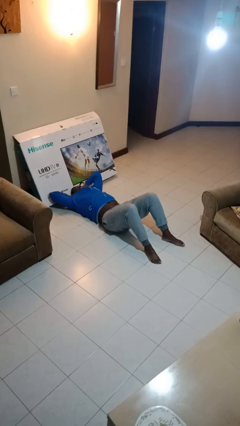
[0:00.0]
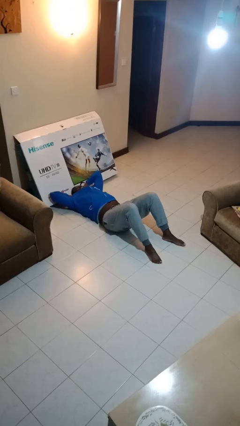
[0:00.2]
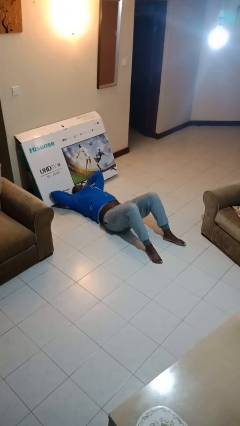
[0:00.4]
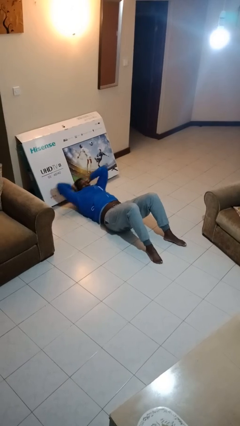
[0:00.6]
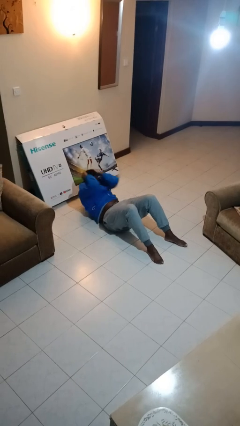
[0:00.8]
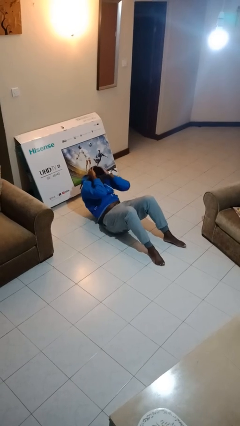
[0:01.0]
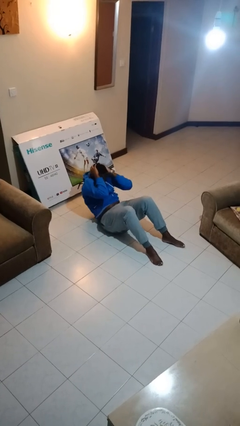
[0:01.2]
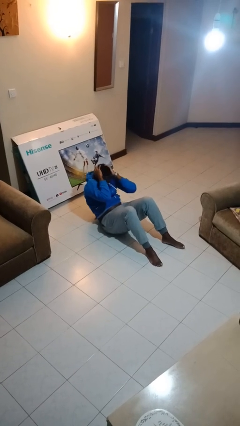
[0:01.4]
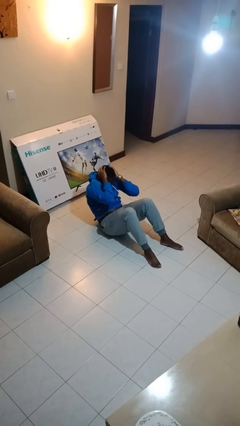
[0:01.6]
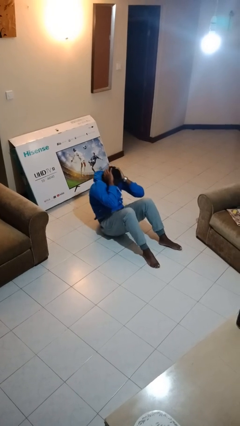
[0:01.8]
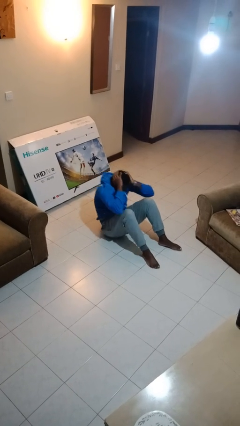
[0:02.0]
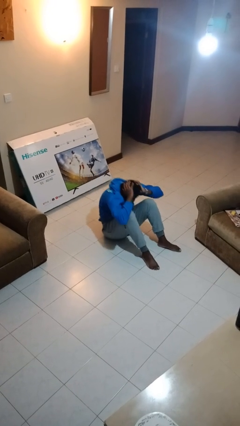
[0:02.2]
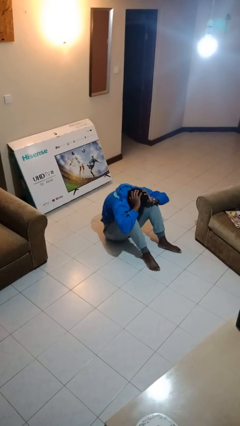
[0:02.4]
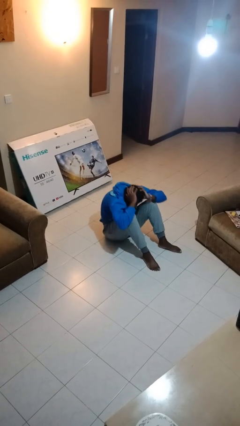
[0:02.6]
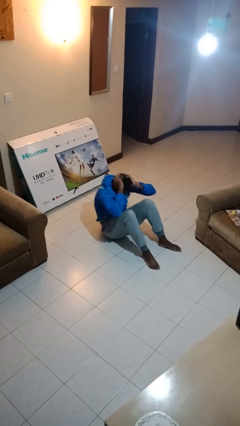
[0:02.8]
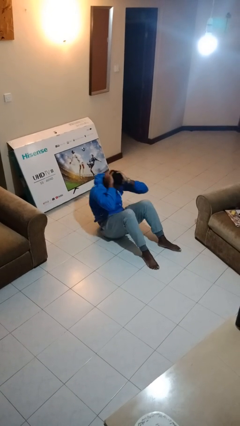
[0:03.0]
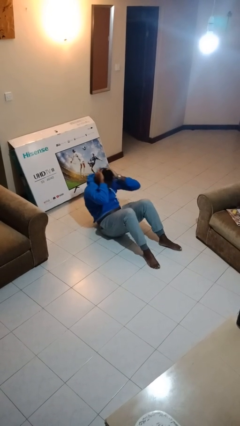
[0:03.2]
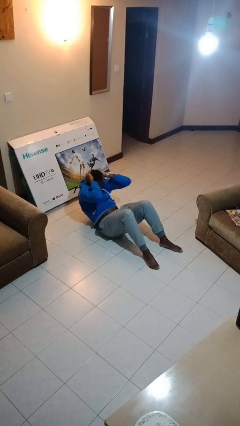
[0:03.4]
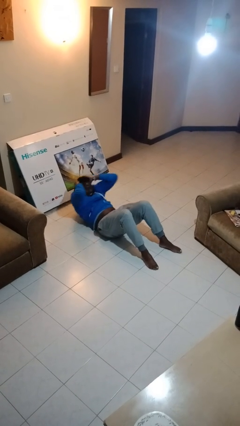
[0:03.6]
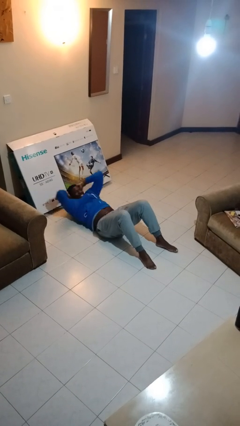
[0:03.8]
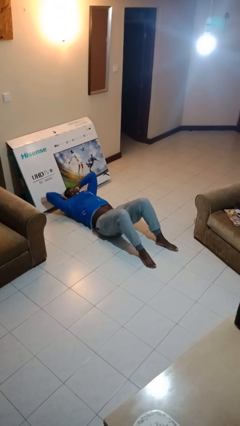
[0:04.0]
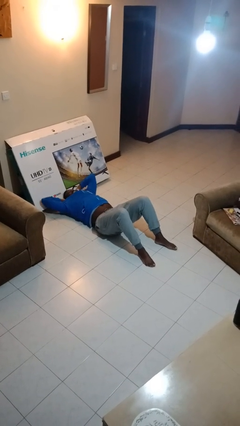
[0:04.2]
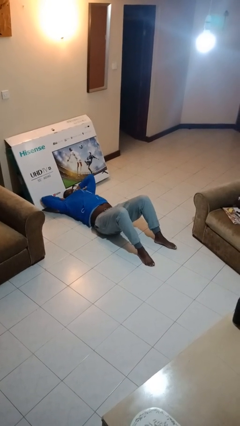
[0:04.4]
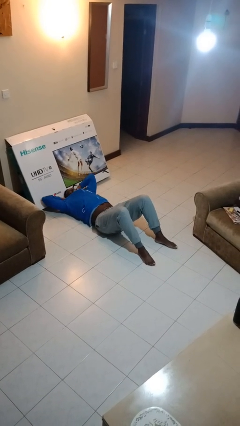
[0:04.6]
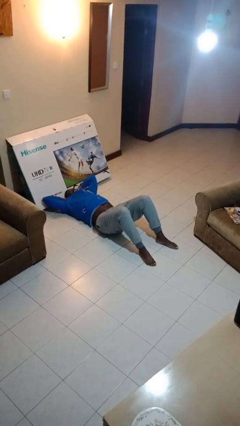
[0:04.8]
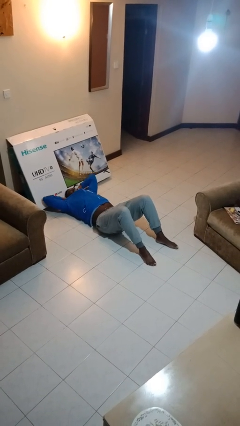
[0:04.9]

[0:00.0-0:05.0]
person exercises with situp

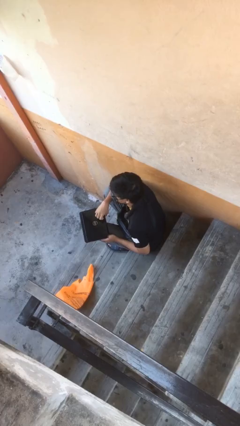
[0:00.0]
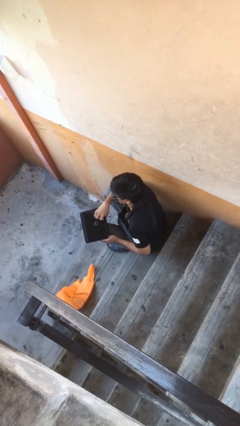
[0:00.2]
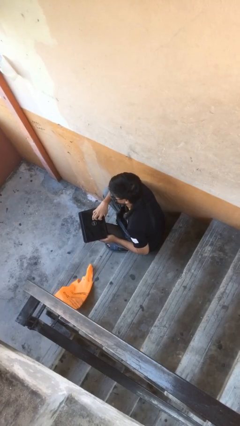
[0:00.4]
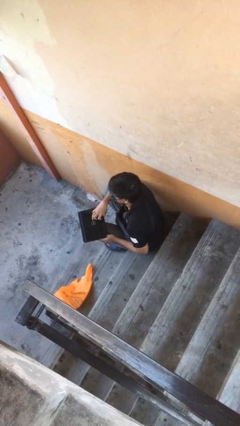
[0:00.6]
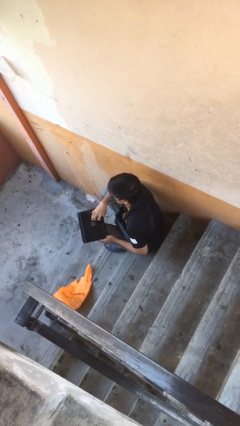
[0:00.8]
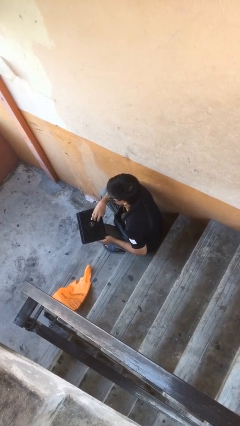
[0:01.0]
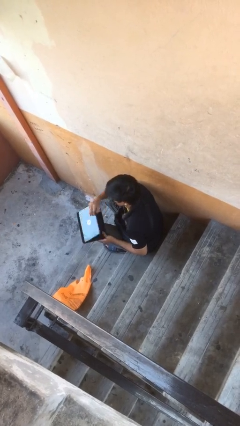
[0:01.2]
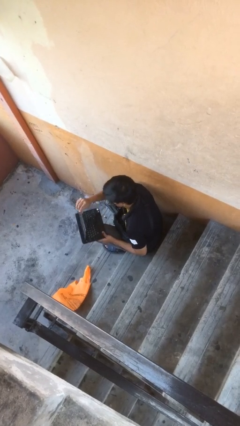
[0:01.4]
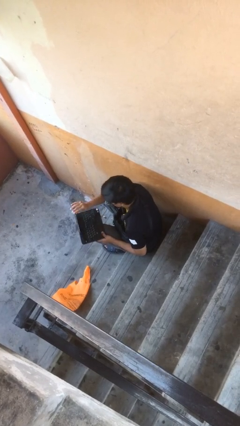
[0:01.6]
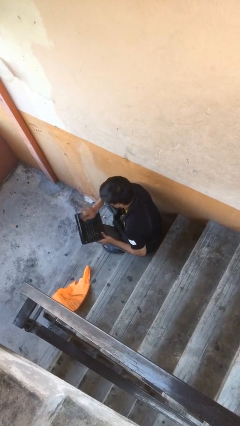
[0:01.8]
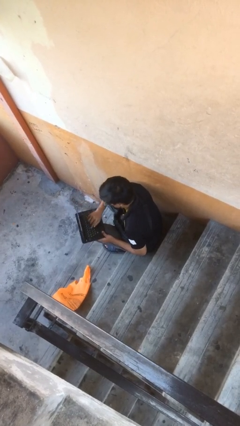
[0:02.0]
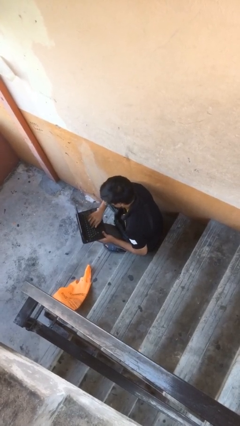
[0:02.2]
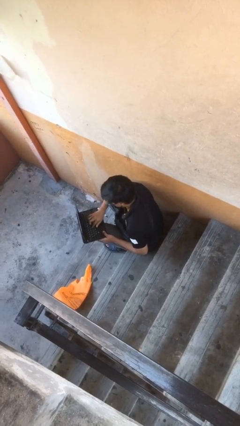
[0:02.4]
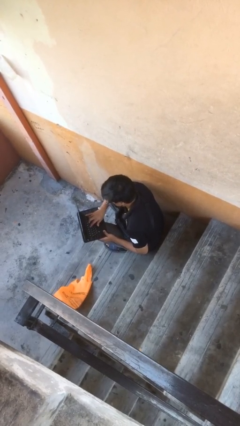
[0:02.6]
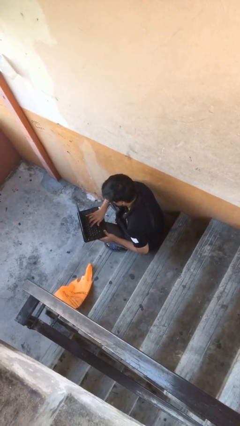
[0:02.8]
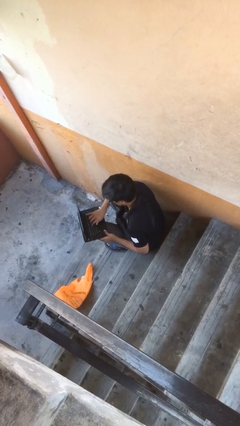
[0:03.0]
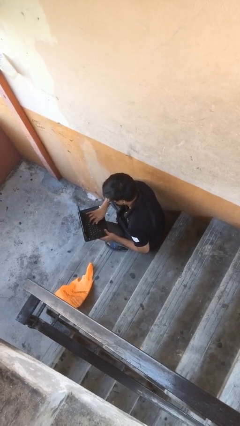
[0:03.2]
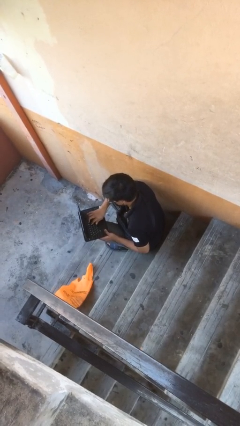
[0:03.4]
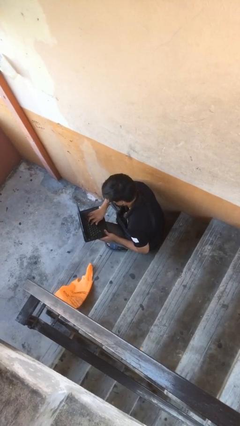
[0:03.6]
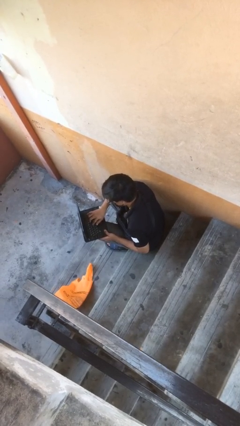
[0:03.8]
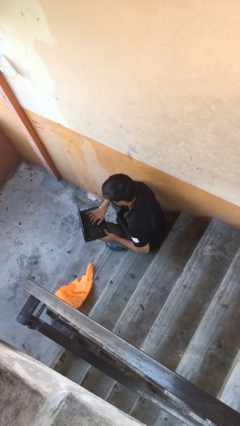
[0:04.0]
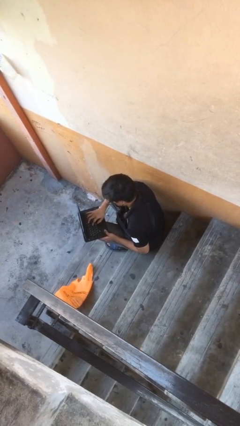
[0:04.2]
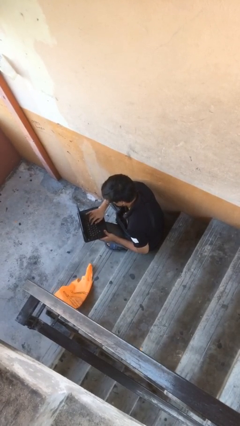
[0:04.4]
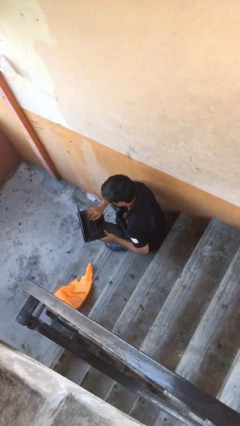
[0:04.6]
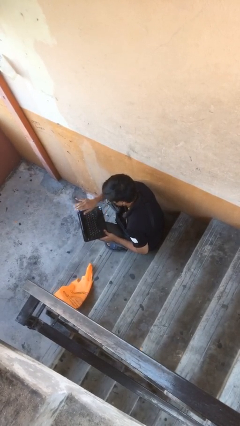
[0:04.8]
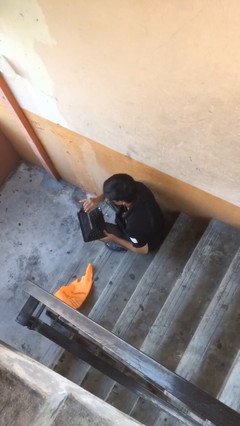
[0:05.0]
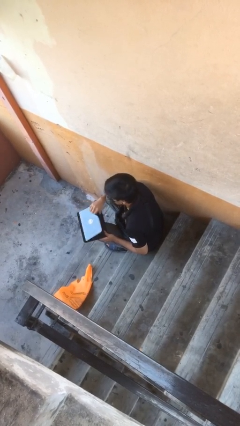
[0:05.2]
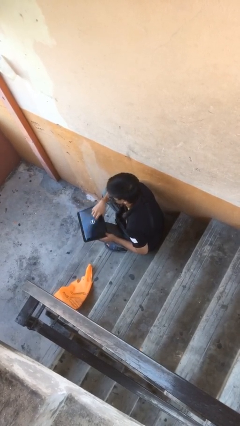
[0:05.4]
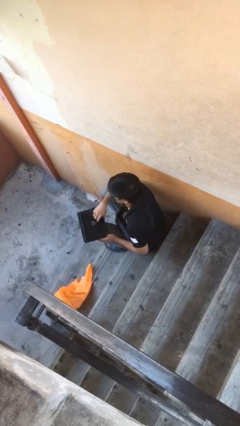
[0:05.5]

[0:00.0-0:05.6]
person interacts with laptop

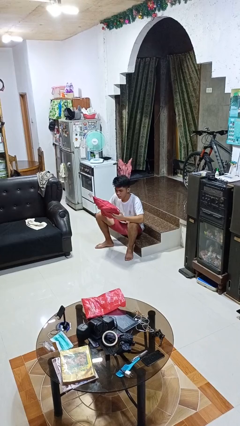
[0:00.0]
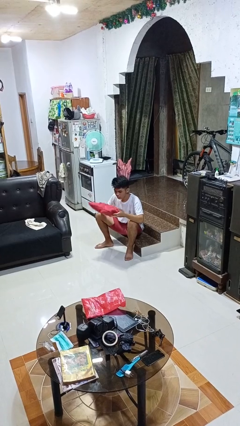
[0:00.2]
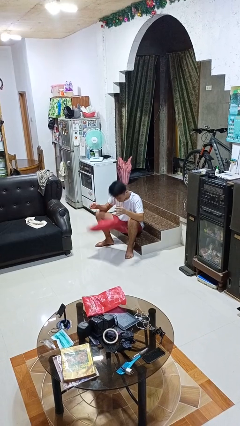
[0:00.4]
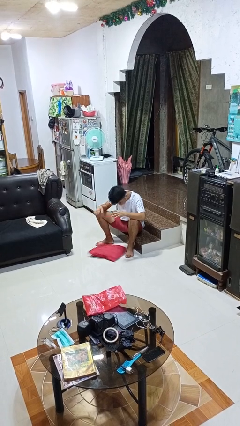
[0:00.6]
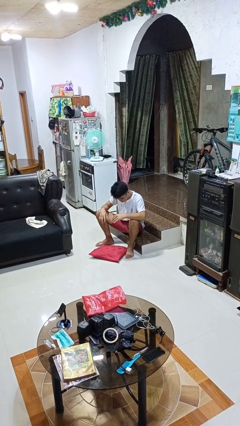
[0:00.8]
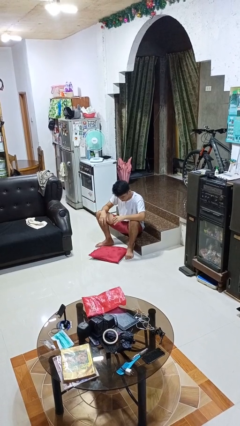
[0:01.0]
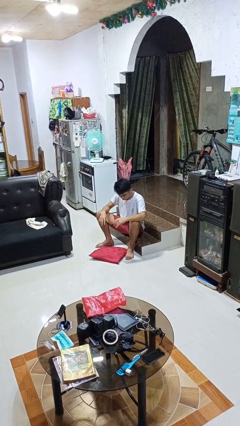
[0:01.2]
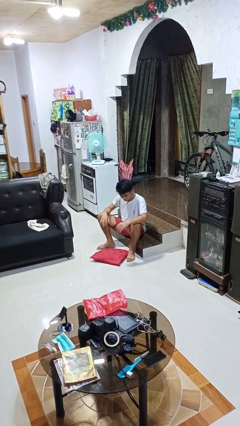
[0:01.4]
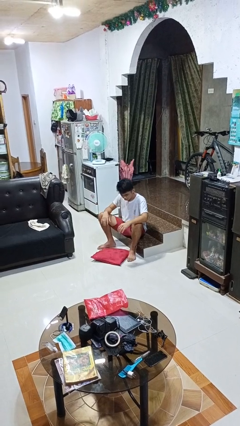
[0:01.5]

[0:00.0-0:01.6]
person drops object

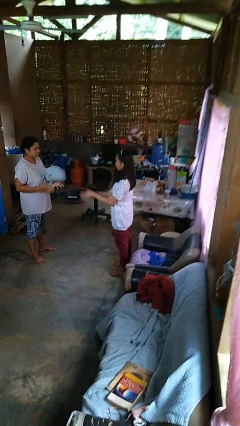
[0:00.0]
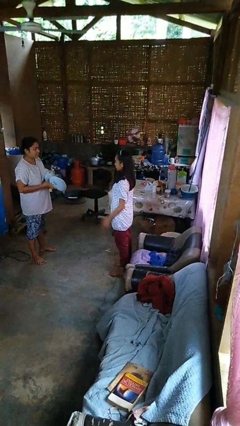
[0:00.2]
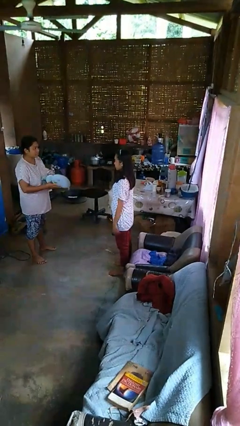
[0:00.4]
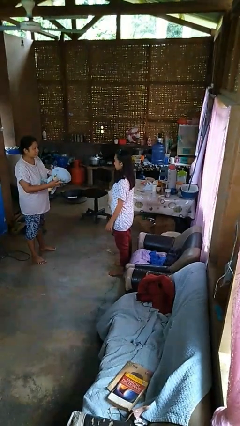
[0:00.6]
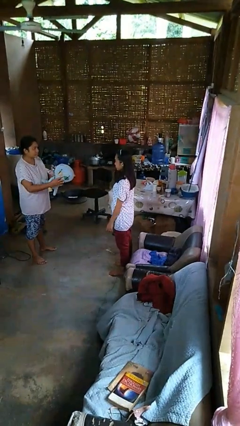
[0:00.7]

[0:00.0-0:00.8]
person throws object to person

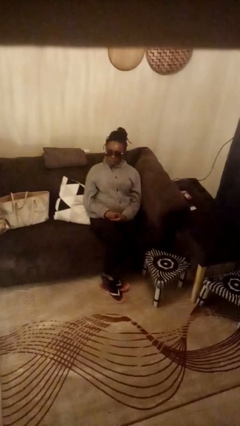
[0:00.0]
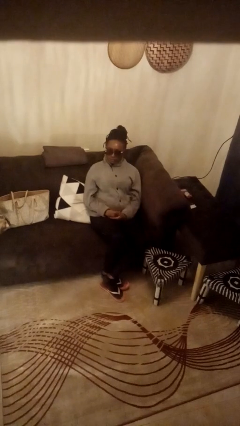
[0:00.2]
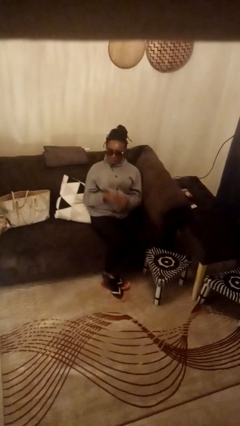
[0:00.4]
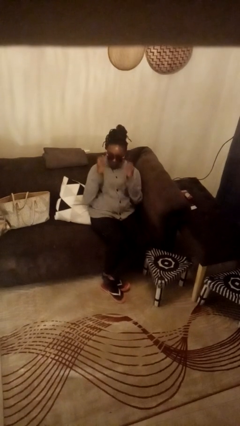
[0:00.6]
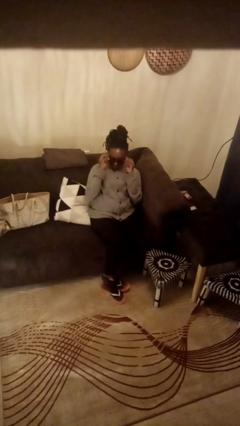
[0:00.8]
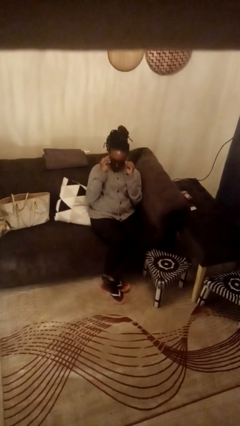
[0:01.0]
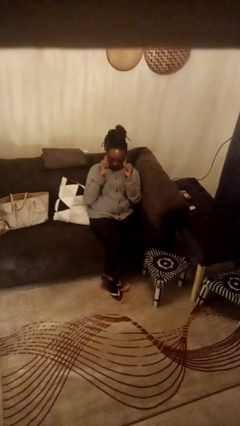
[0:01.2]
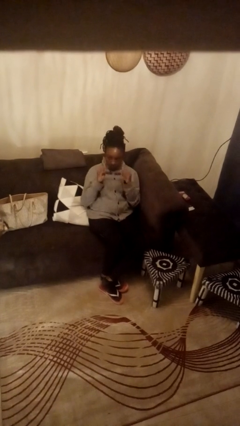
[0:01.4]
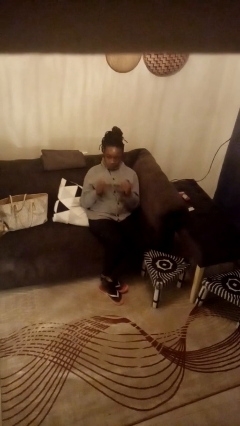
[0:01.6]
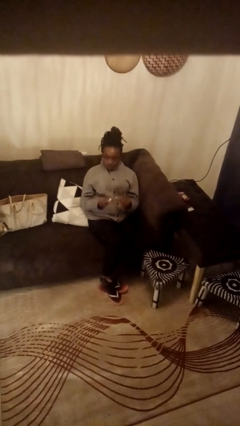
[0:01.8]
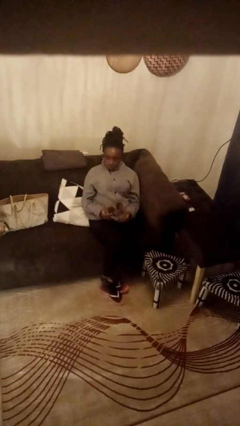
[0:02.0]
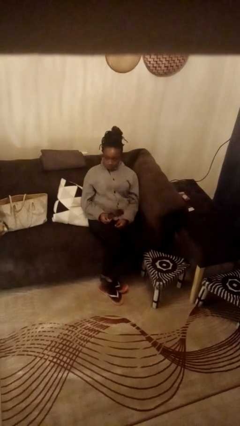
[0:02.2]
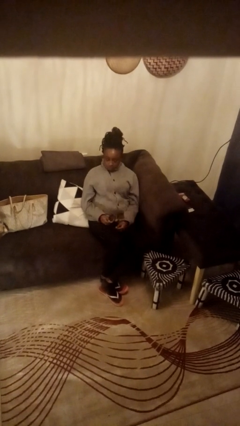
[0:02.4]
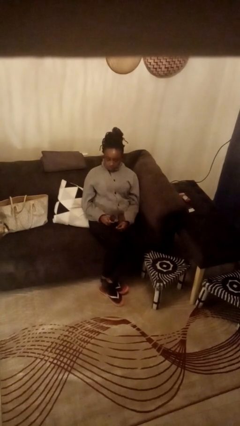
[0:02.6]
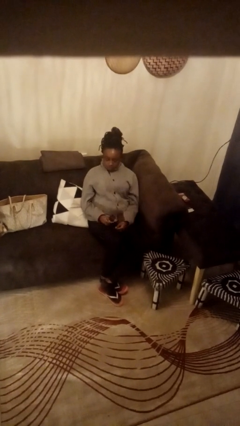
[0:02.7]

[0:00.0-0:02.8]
person takes off sunglasses

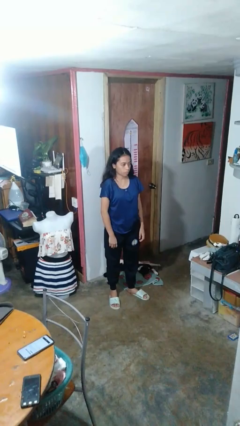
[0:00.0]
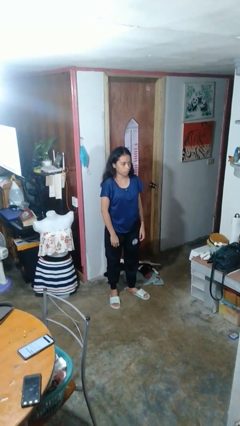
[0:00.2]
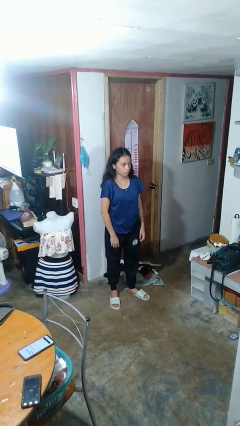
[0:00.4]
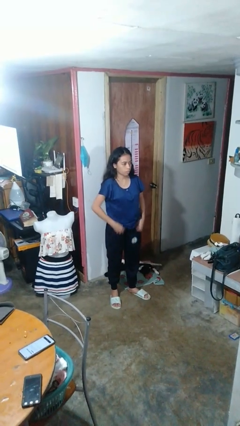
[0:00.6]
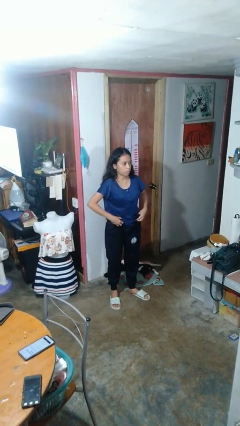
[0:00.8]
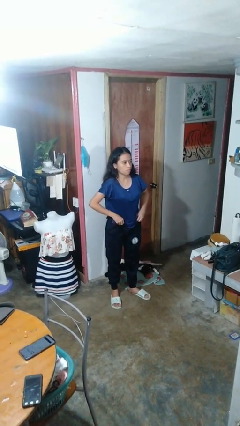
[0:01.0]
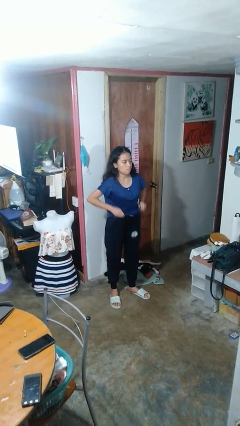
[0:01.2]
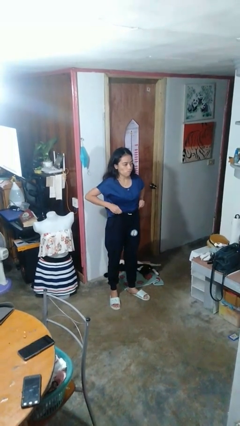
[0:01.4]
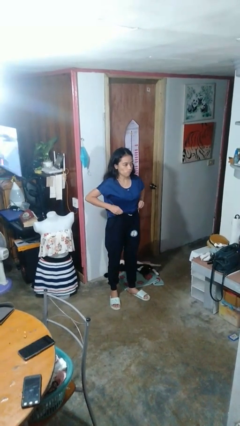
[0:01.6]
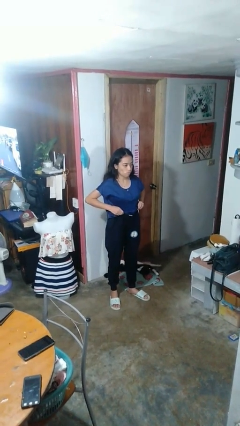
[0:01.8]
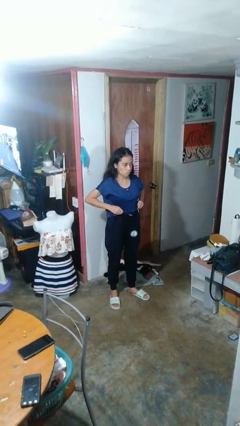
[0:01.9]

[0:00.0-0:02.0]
person hikes up pants
